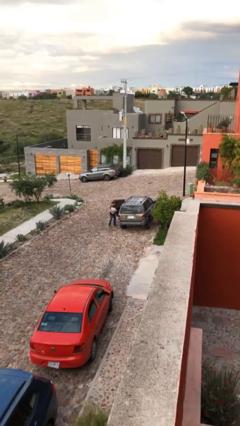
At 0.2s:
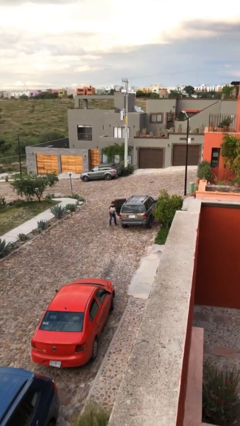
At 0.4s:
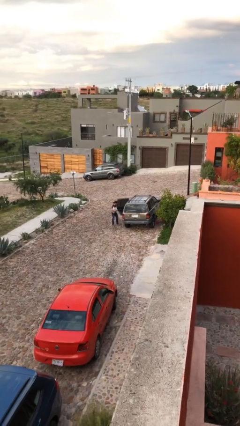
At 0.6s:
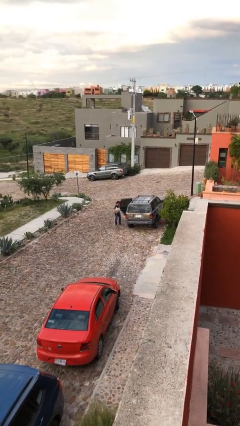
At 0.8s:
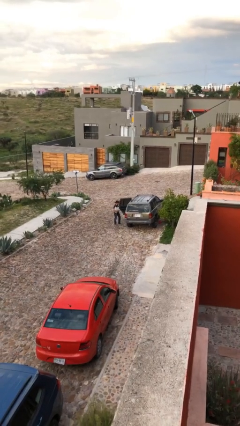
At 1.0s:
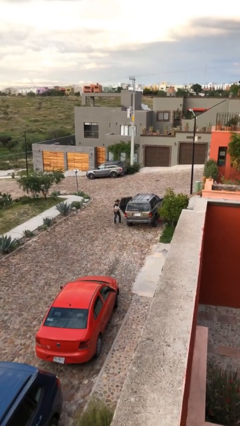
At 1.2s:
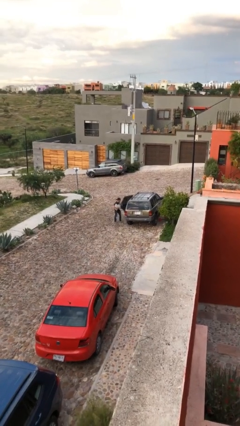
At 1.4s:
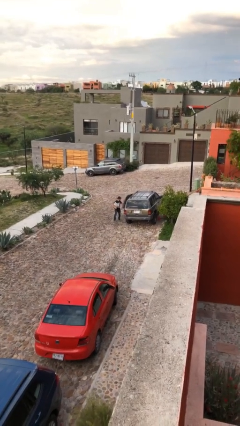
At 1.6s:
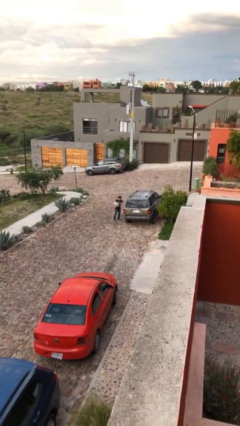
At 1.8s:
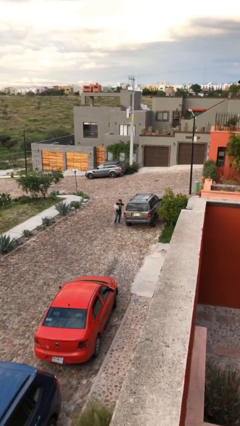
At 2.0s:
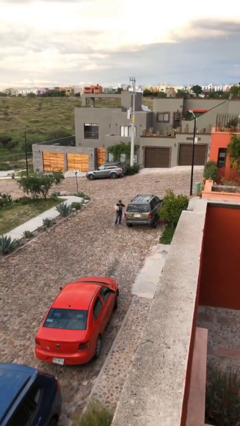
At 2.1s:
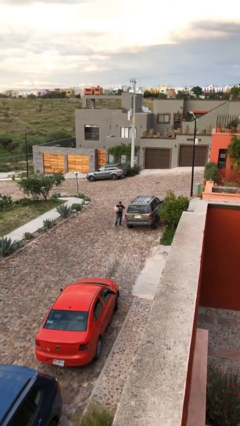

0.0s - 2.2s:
person closes car door

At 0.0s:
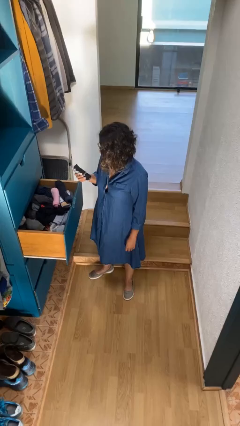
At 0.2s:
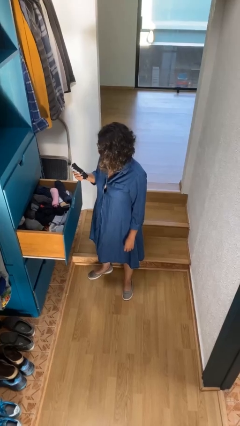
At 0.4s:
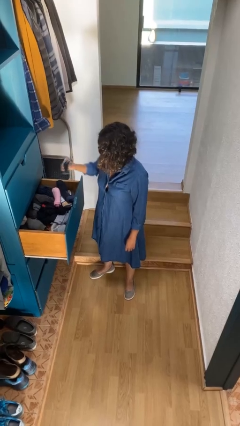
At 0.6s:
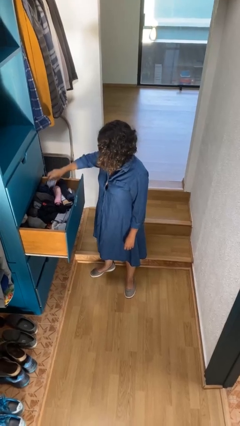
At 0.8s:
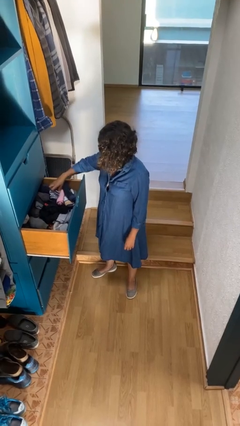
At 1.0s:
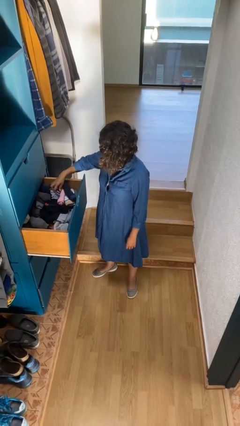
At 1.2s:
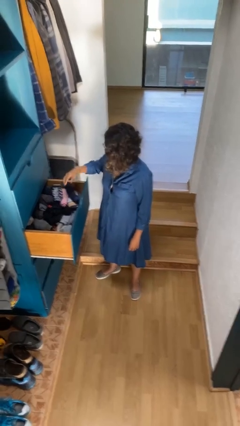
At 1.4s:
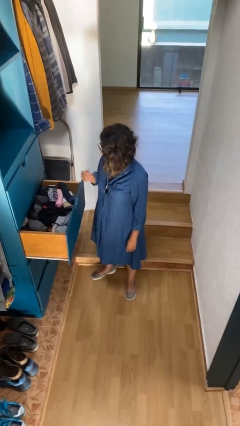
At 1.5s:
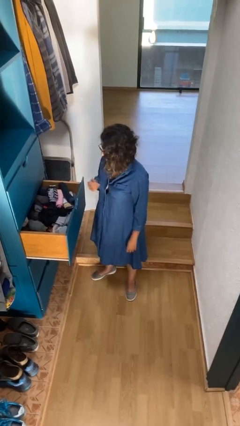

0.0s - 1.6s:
person puts clothes into dresser

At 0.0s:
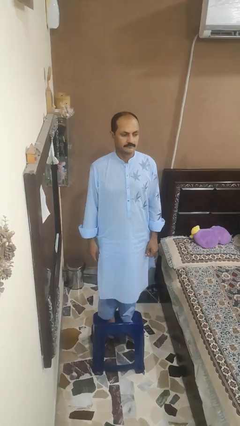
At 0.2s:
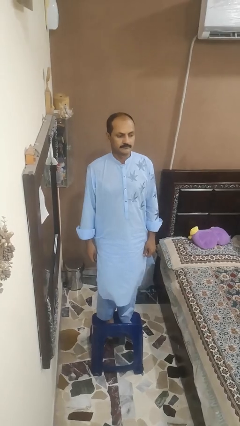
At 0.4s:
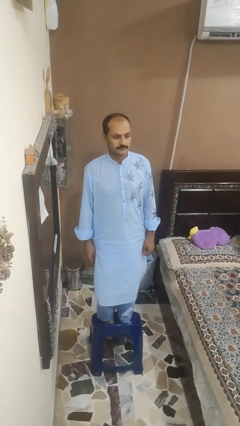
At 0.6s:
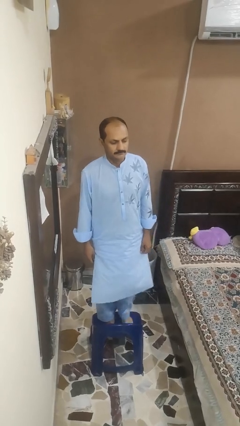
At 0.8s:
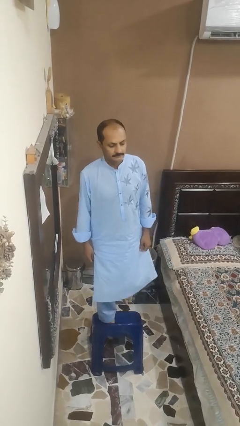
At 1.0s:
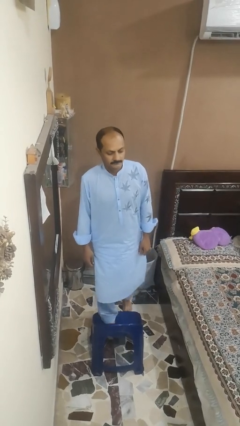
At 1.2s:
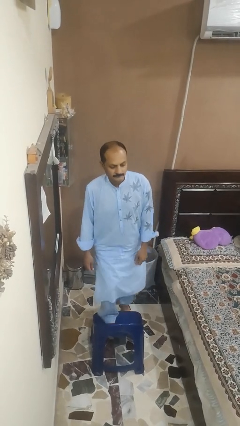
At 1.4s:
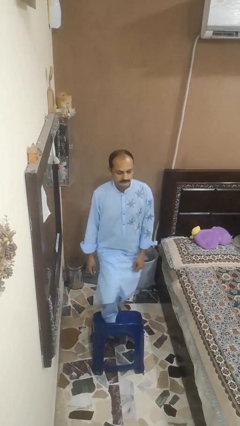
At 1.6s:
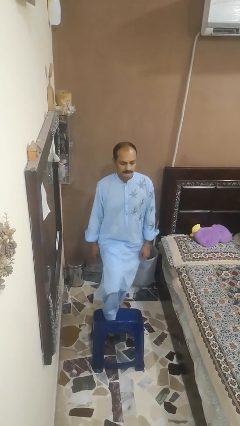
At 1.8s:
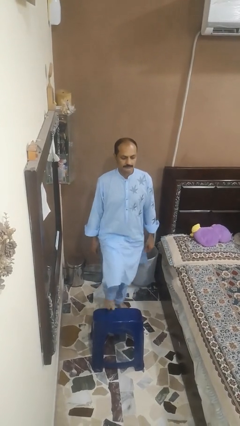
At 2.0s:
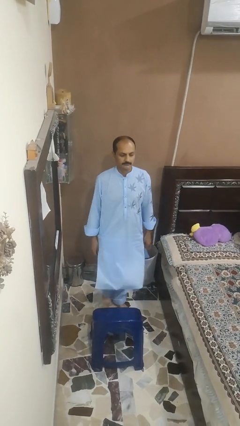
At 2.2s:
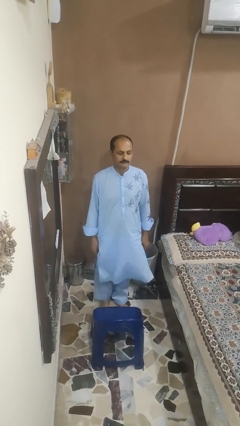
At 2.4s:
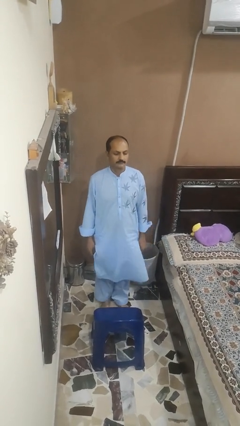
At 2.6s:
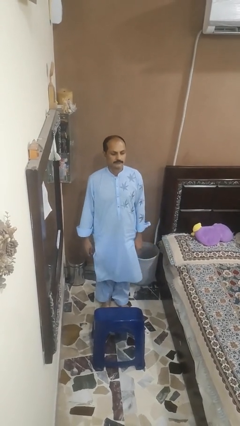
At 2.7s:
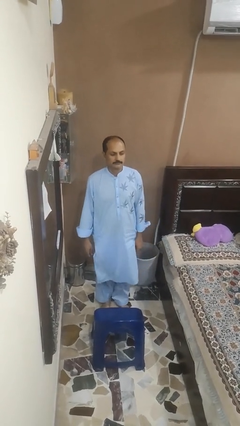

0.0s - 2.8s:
person climbs off chair

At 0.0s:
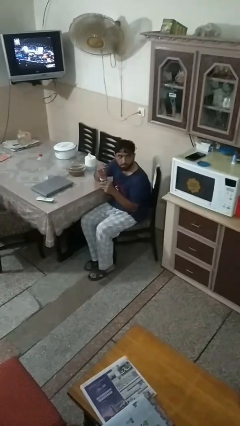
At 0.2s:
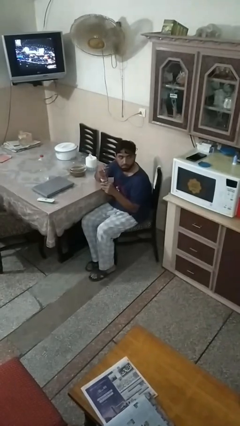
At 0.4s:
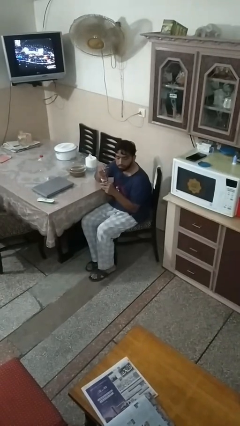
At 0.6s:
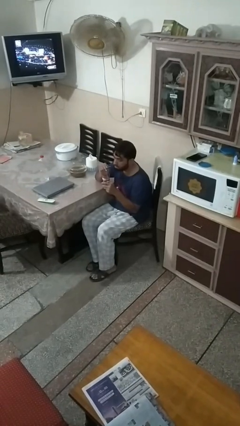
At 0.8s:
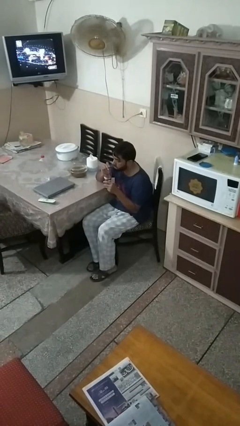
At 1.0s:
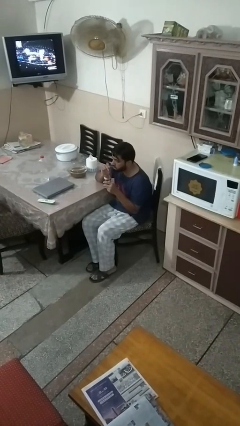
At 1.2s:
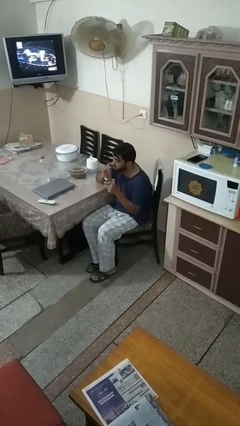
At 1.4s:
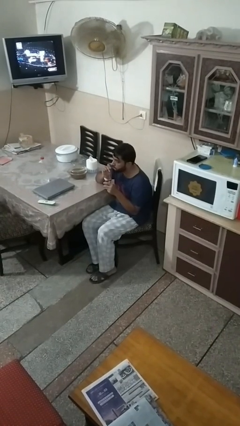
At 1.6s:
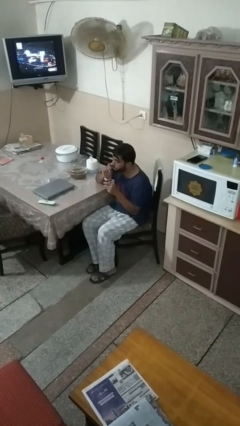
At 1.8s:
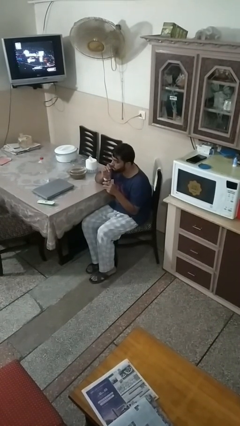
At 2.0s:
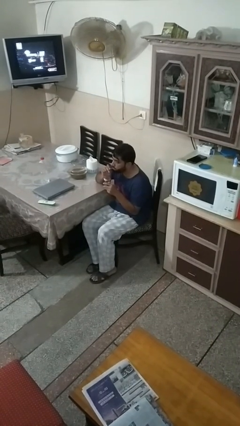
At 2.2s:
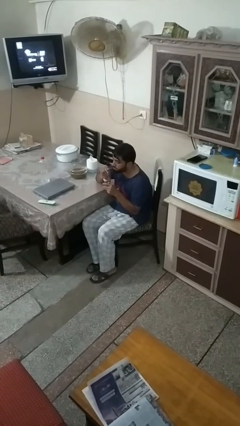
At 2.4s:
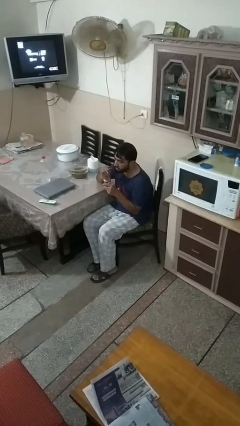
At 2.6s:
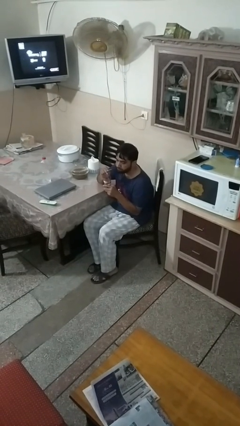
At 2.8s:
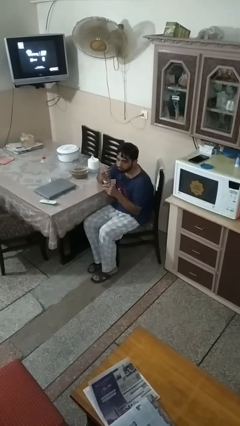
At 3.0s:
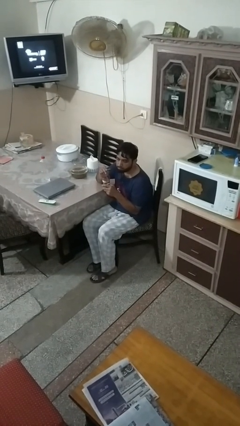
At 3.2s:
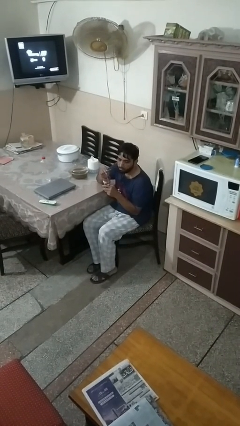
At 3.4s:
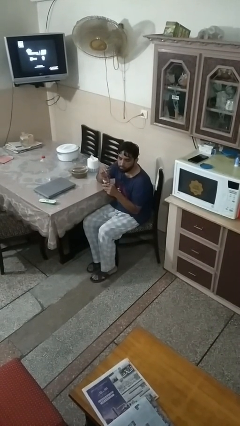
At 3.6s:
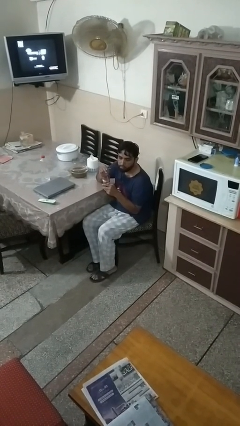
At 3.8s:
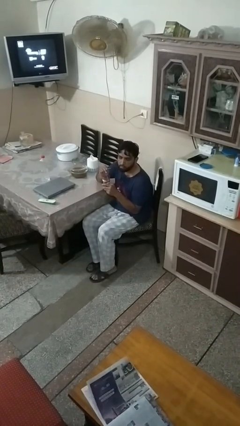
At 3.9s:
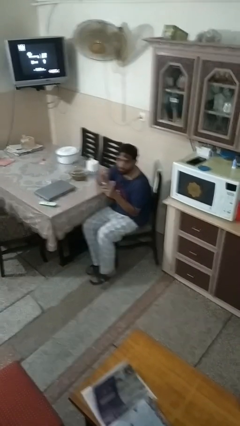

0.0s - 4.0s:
person drinks from straw

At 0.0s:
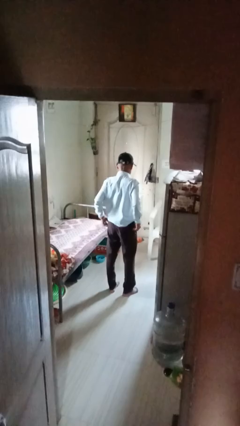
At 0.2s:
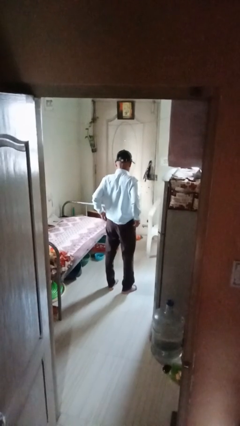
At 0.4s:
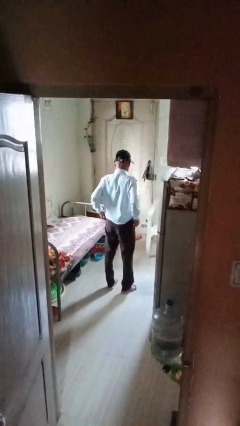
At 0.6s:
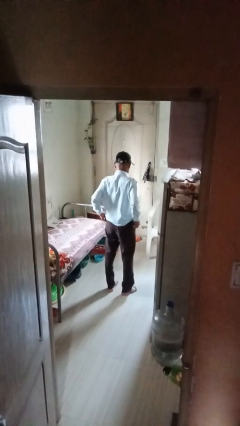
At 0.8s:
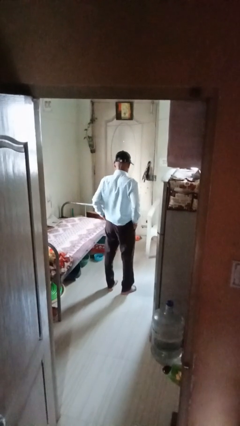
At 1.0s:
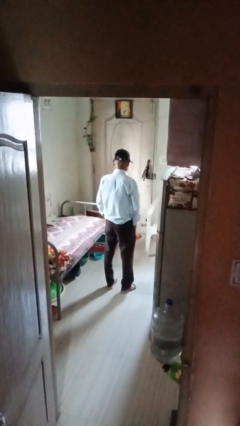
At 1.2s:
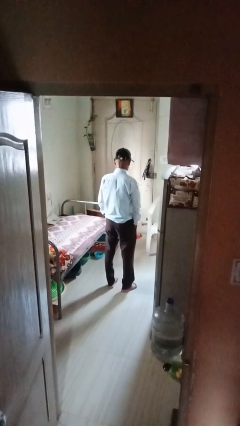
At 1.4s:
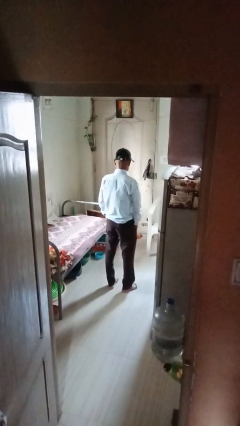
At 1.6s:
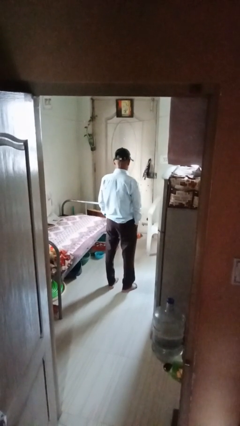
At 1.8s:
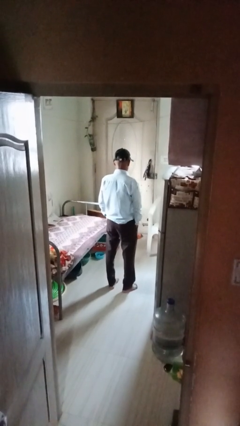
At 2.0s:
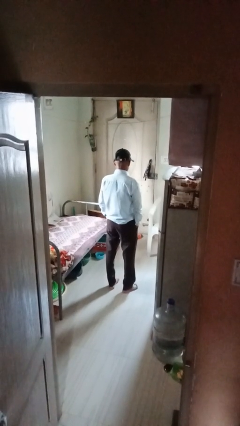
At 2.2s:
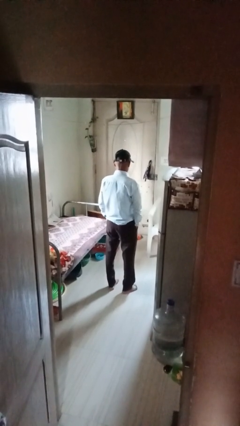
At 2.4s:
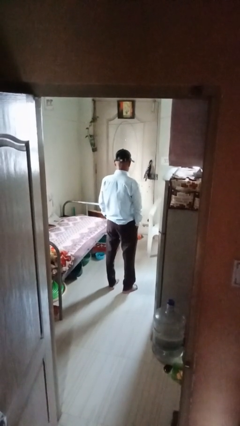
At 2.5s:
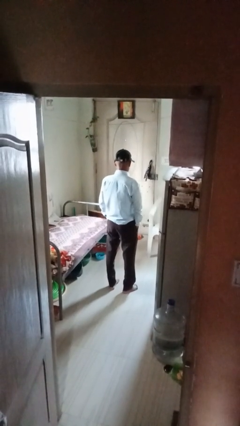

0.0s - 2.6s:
person puts hands in back pockets

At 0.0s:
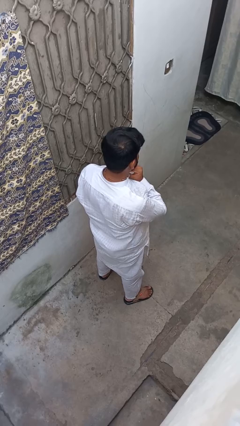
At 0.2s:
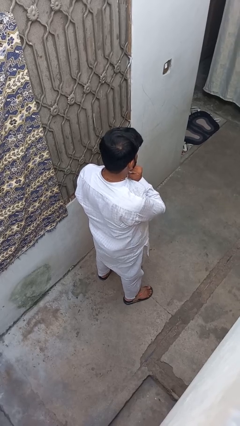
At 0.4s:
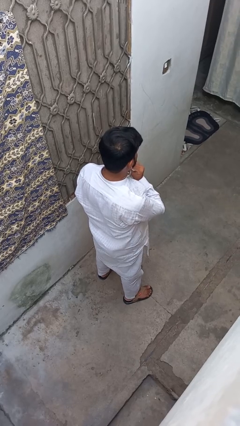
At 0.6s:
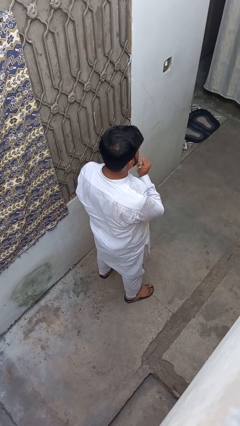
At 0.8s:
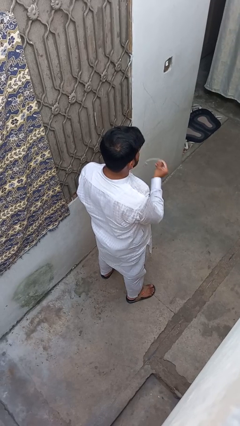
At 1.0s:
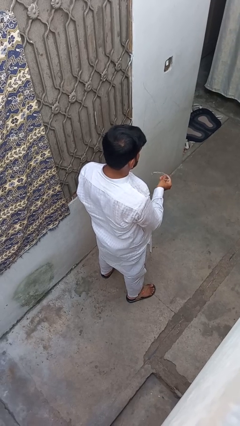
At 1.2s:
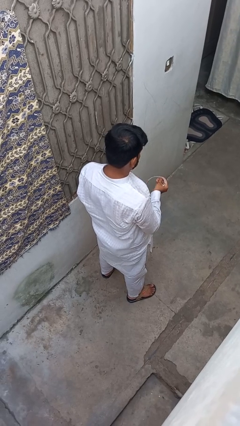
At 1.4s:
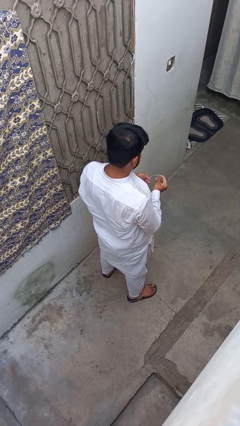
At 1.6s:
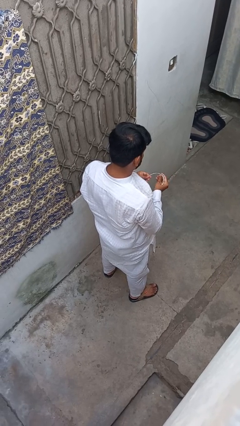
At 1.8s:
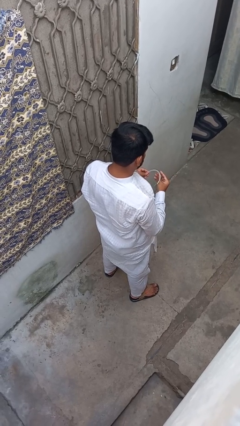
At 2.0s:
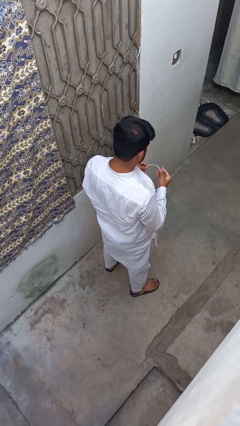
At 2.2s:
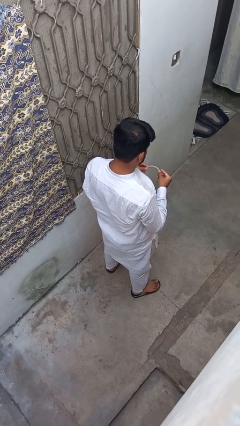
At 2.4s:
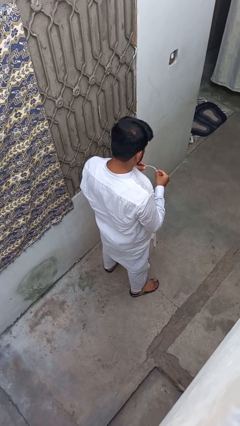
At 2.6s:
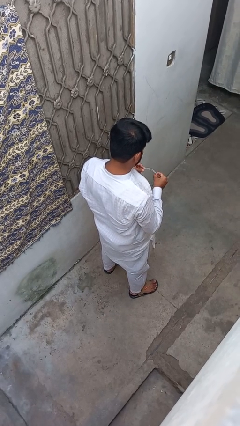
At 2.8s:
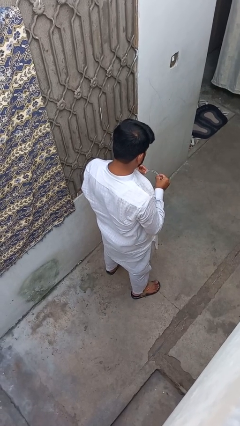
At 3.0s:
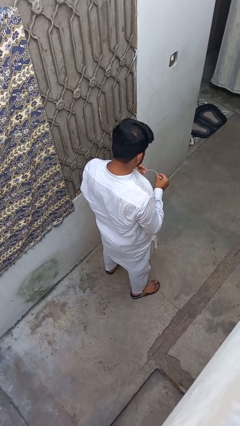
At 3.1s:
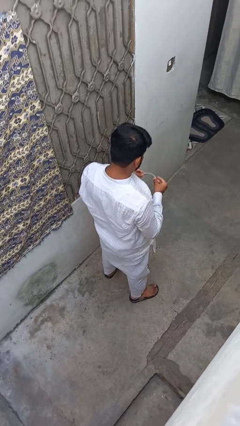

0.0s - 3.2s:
person takes off necklace

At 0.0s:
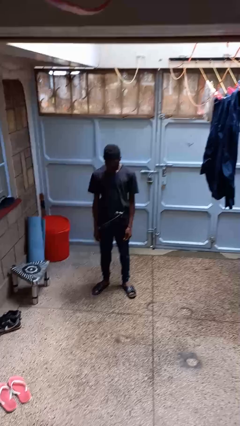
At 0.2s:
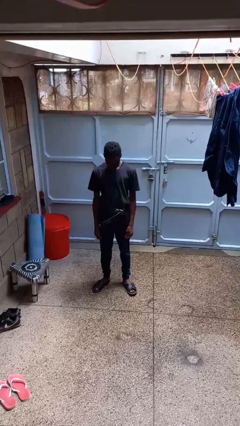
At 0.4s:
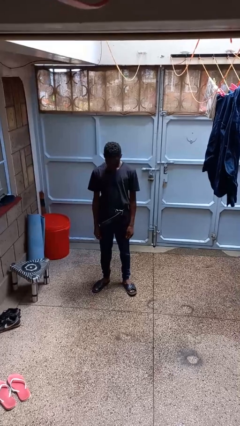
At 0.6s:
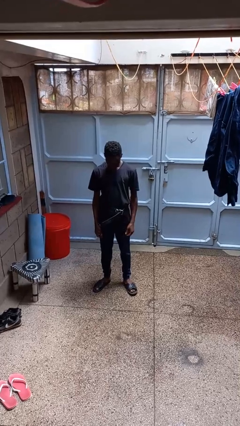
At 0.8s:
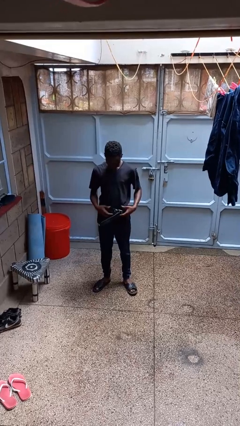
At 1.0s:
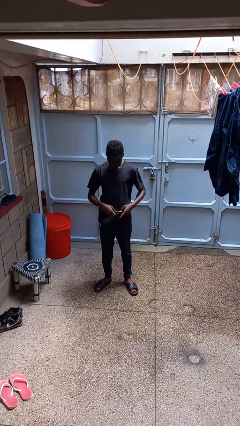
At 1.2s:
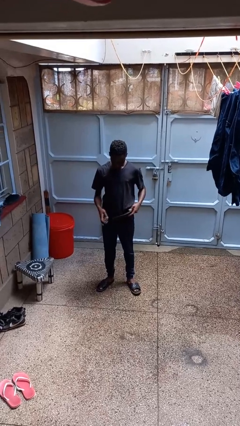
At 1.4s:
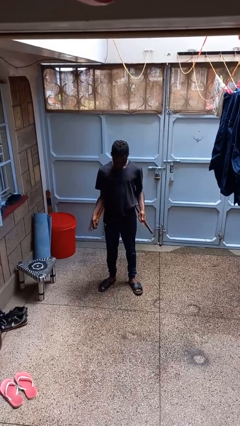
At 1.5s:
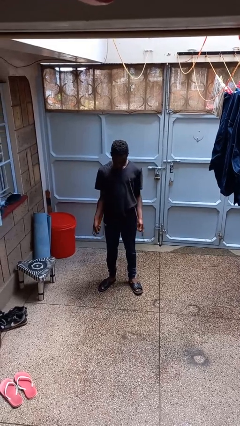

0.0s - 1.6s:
person takes off belt
